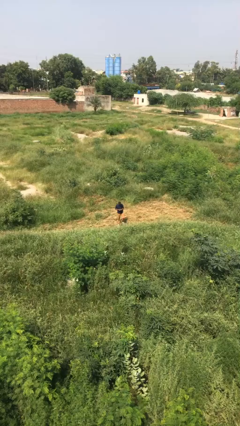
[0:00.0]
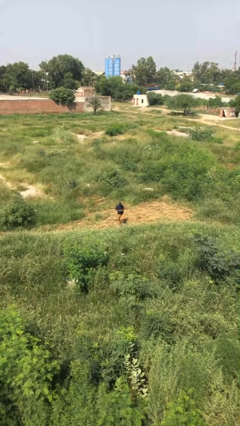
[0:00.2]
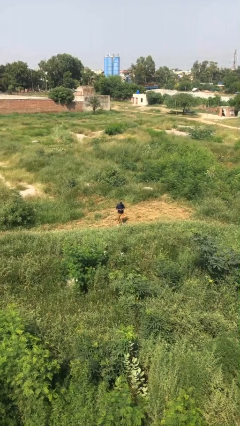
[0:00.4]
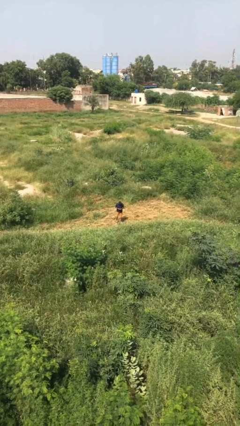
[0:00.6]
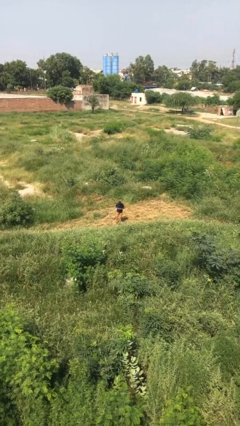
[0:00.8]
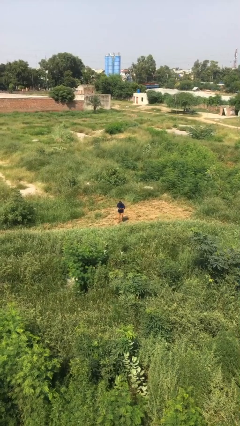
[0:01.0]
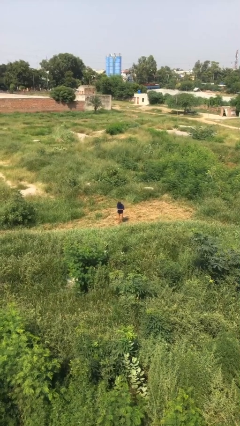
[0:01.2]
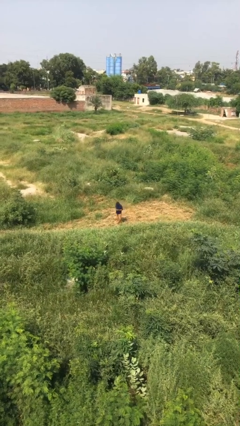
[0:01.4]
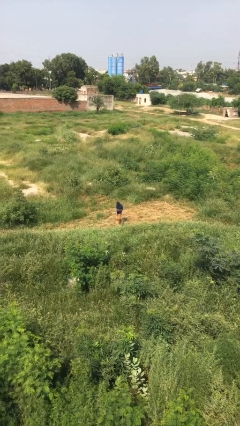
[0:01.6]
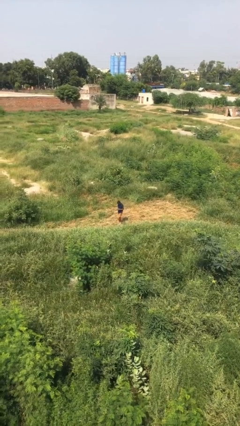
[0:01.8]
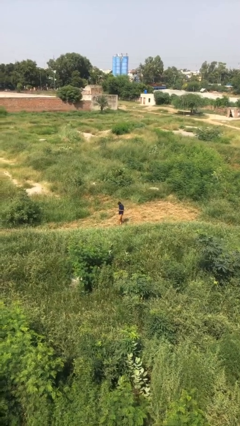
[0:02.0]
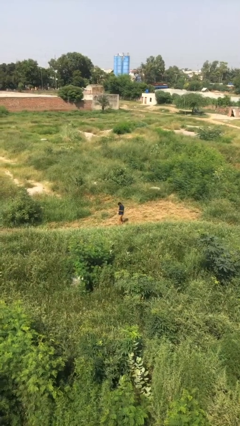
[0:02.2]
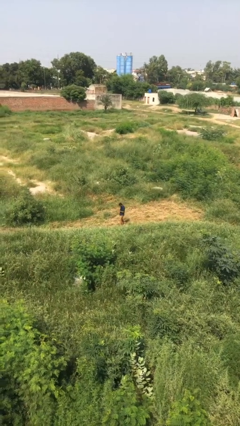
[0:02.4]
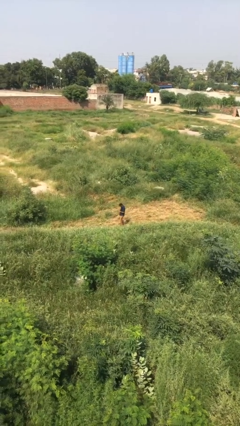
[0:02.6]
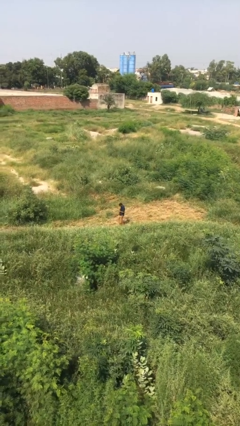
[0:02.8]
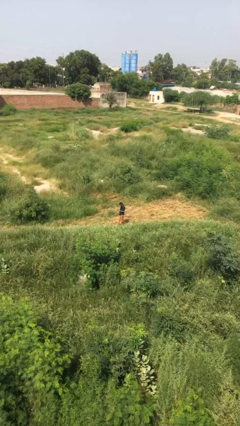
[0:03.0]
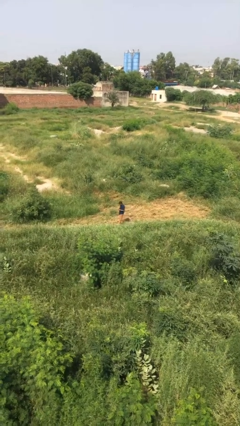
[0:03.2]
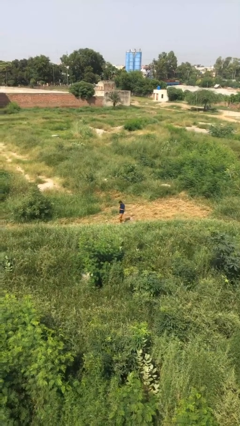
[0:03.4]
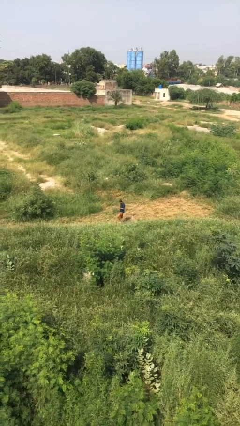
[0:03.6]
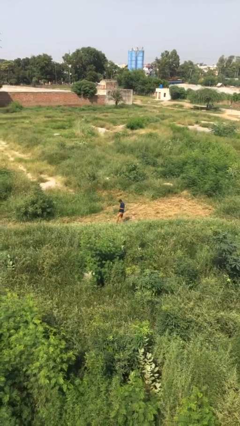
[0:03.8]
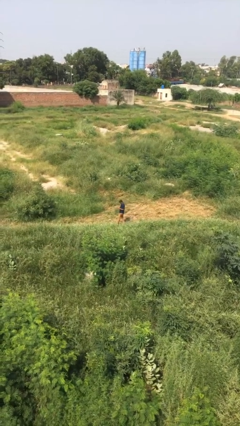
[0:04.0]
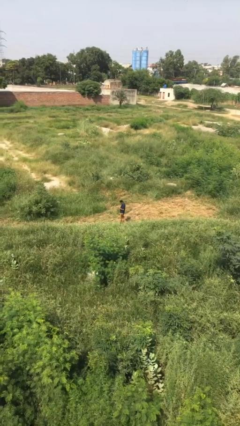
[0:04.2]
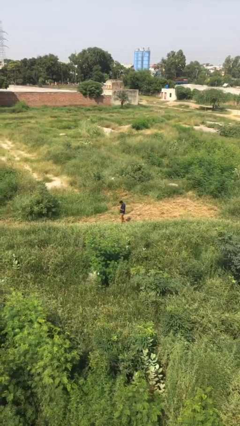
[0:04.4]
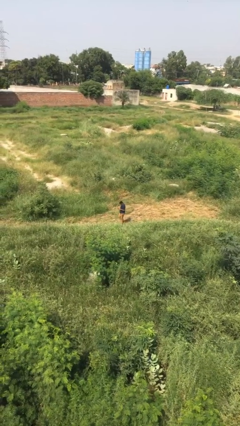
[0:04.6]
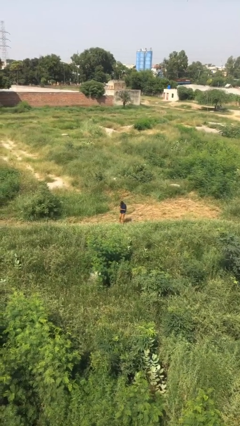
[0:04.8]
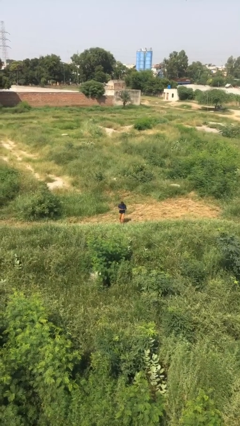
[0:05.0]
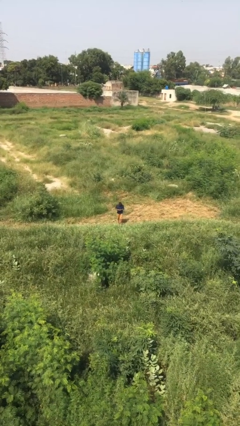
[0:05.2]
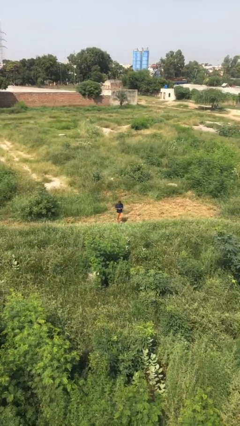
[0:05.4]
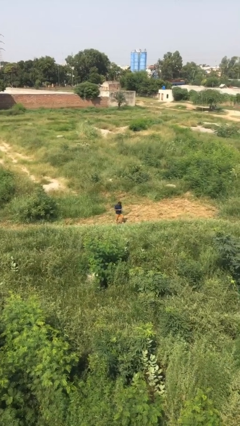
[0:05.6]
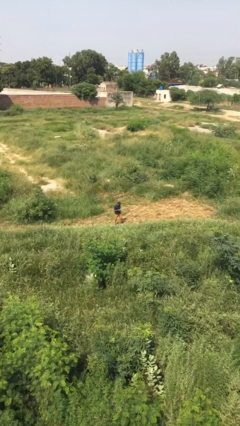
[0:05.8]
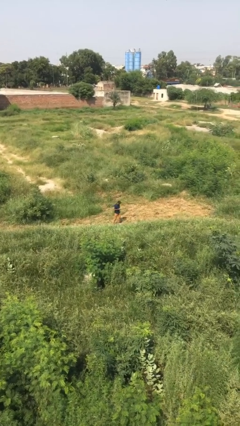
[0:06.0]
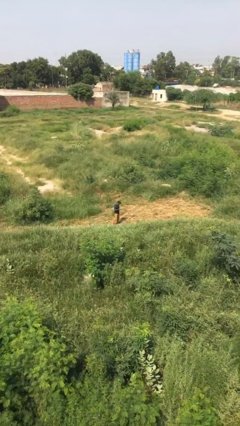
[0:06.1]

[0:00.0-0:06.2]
person texts on phone

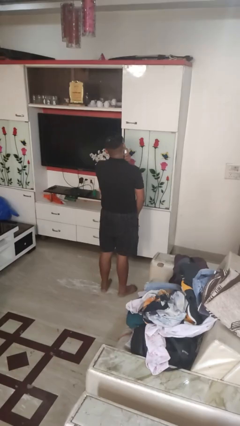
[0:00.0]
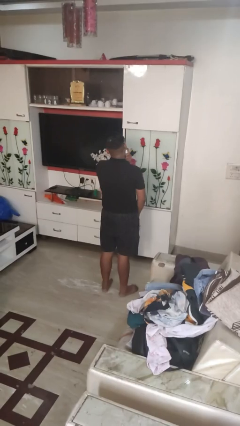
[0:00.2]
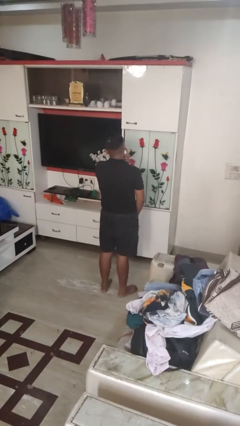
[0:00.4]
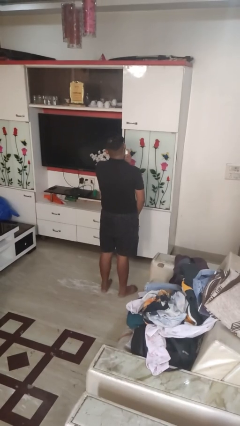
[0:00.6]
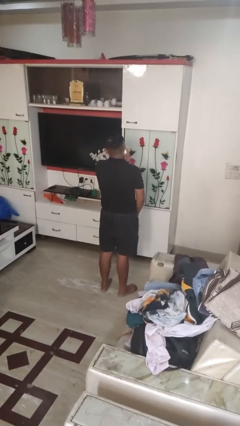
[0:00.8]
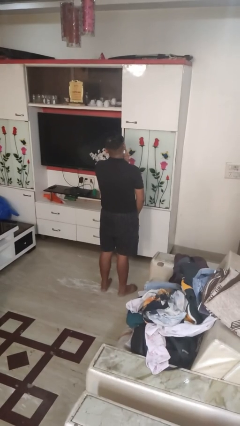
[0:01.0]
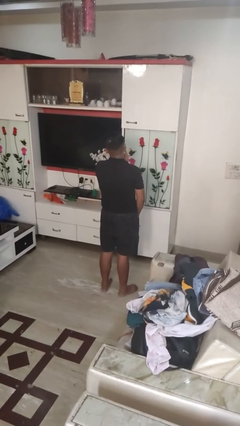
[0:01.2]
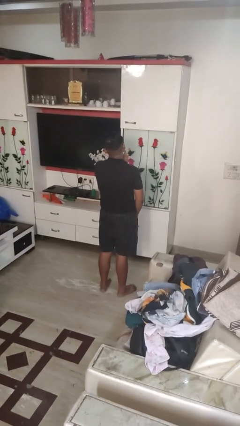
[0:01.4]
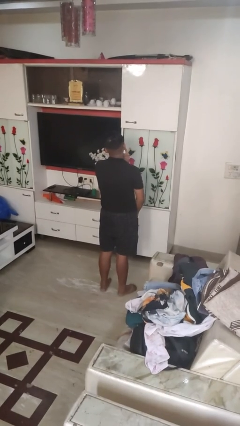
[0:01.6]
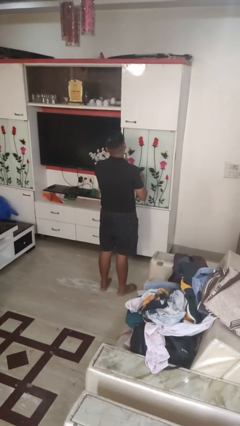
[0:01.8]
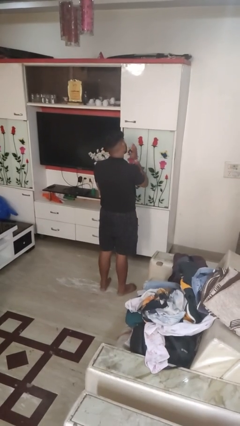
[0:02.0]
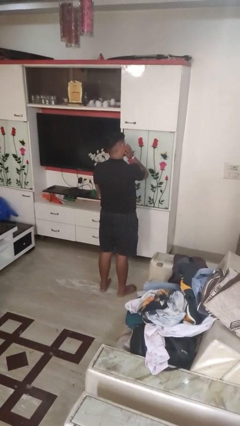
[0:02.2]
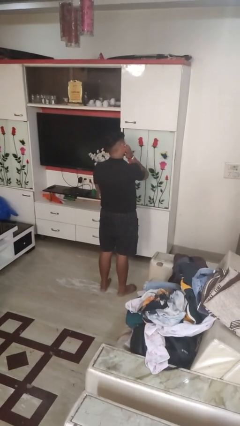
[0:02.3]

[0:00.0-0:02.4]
person applies shaving cream

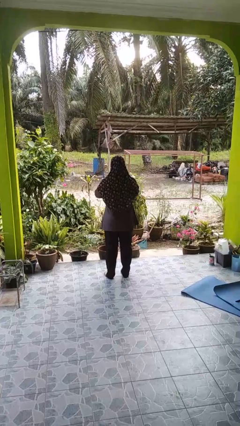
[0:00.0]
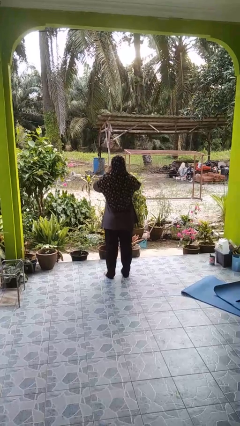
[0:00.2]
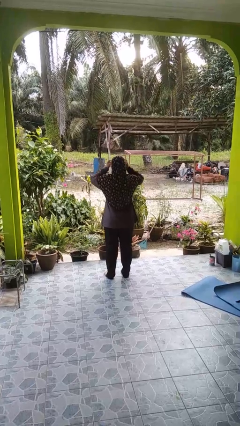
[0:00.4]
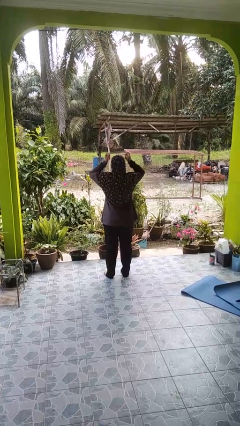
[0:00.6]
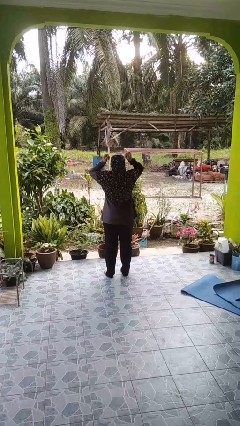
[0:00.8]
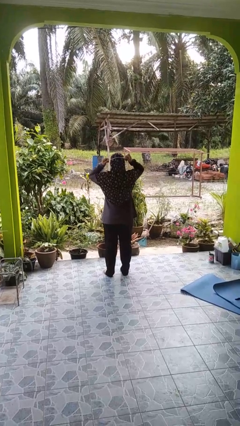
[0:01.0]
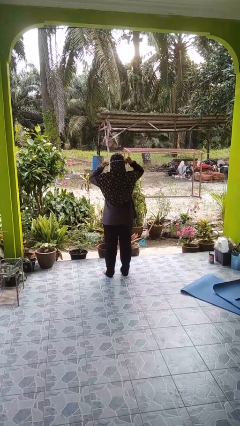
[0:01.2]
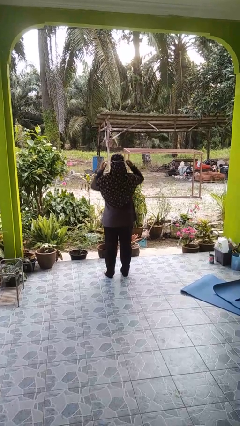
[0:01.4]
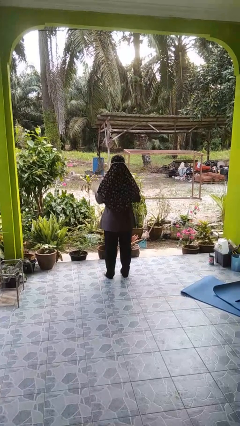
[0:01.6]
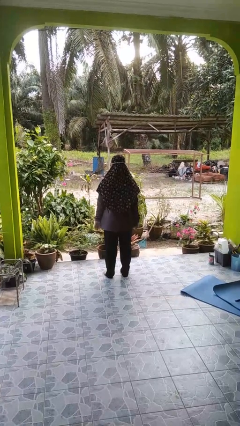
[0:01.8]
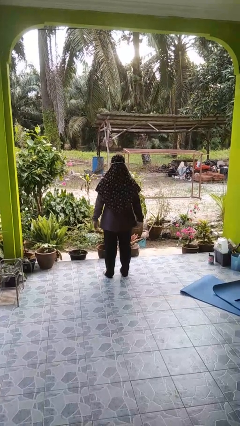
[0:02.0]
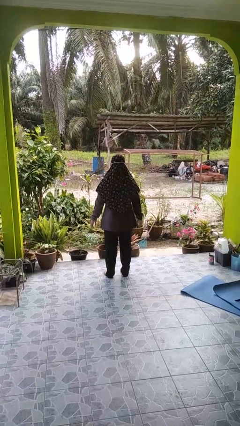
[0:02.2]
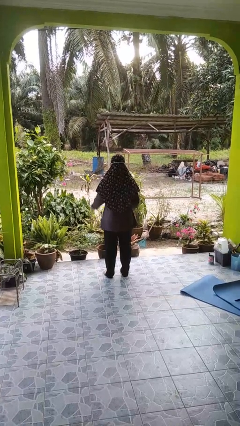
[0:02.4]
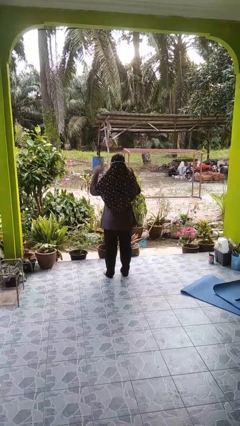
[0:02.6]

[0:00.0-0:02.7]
person puts on facemask

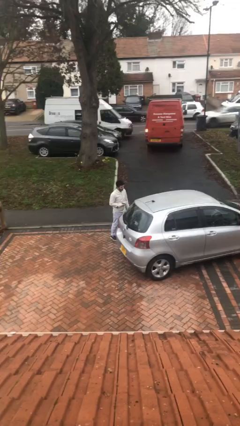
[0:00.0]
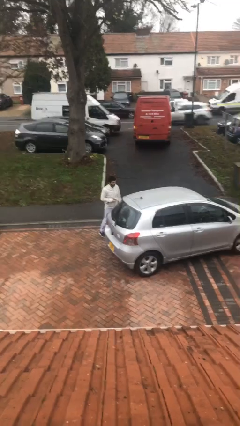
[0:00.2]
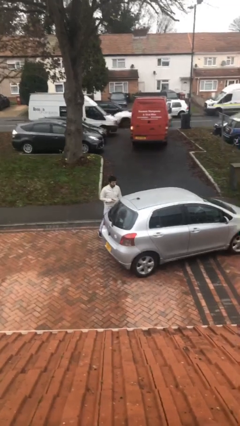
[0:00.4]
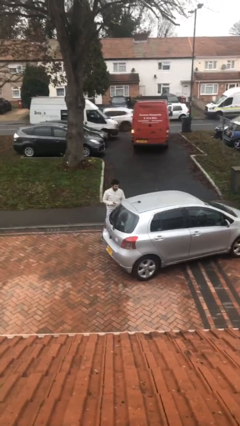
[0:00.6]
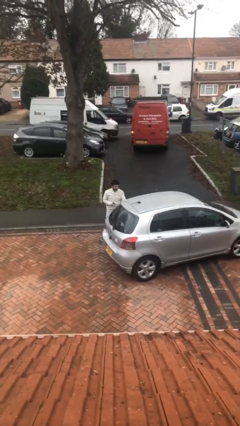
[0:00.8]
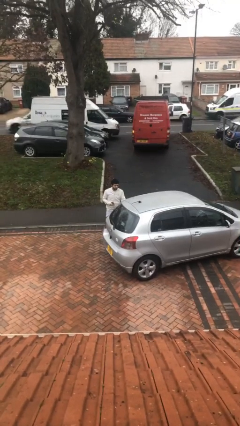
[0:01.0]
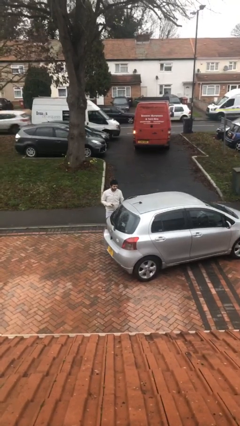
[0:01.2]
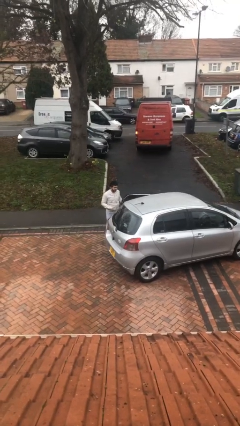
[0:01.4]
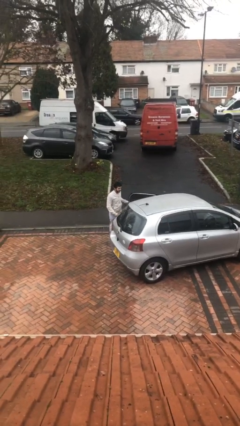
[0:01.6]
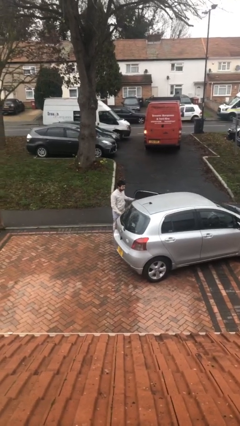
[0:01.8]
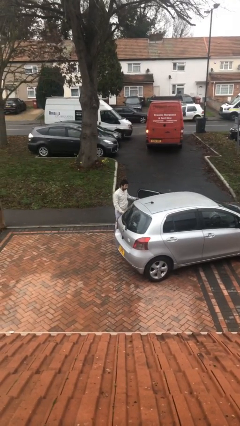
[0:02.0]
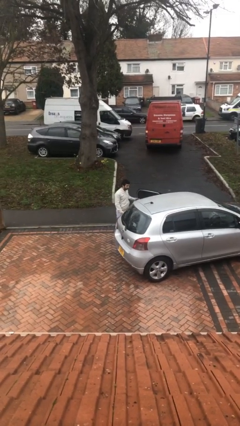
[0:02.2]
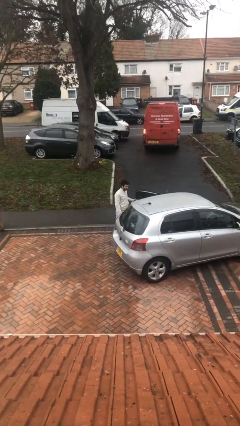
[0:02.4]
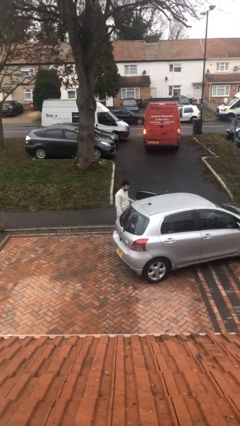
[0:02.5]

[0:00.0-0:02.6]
person opens car door

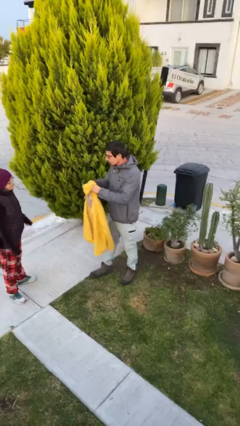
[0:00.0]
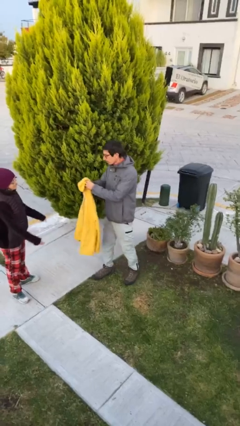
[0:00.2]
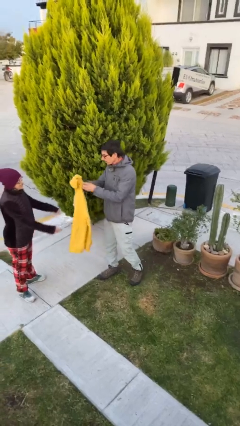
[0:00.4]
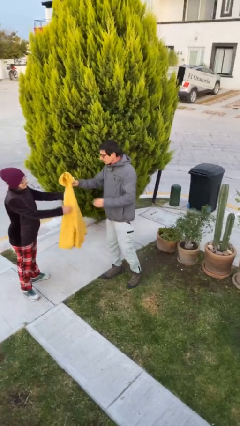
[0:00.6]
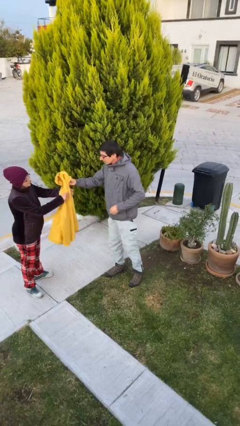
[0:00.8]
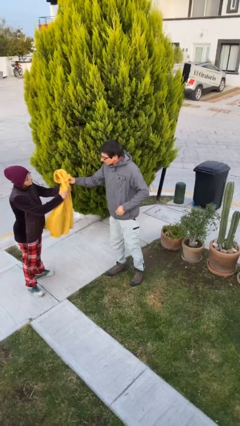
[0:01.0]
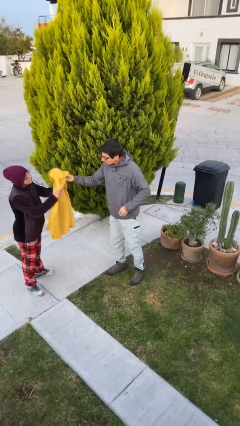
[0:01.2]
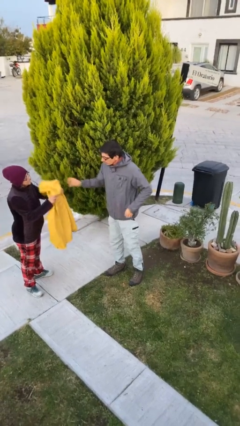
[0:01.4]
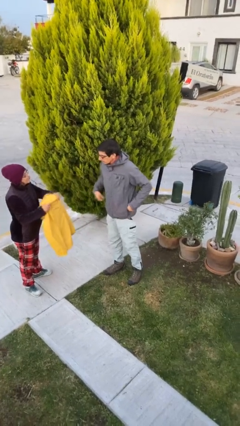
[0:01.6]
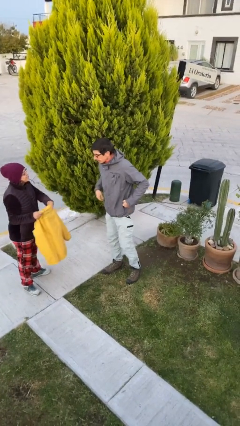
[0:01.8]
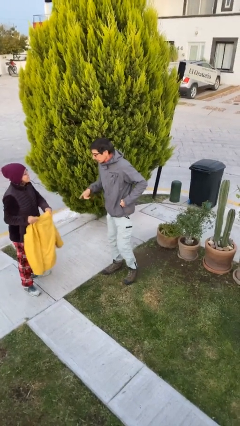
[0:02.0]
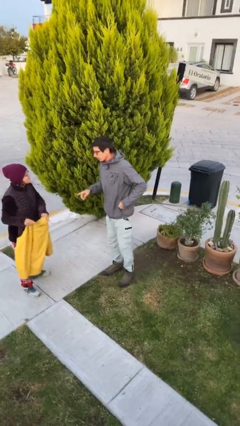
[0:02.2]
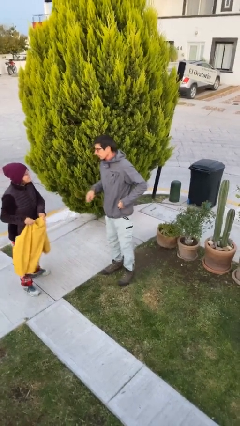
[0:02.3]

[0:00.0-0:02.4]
person transfers object to person

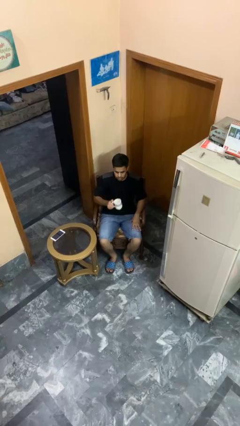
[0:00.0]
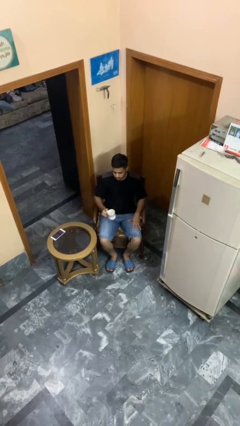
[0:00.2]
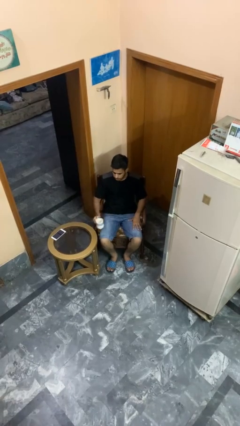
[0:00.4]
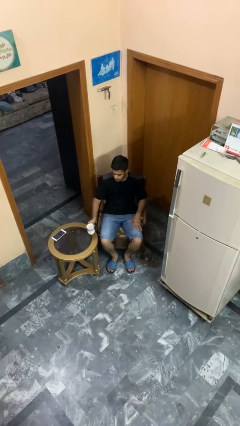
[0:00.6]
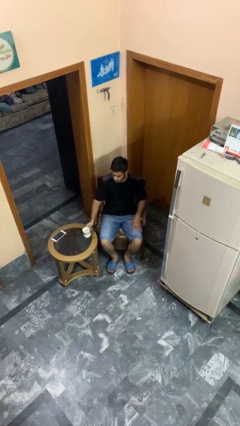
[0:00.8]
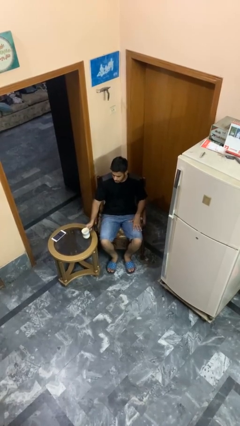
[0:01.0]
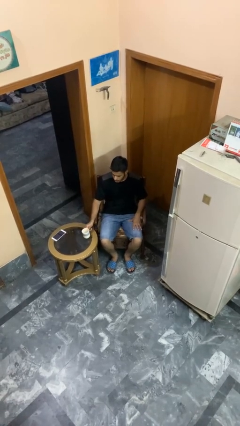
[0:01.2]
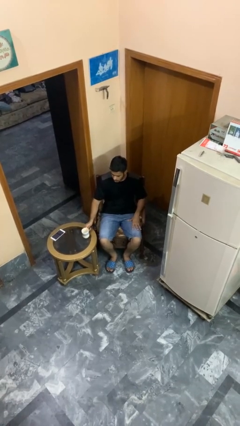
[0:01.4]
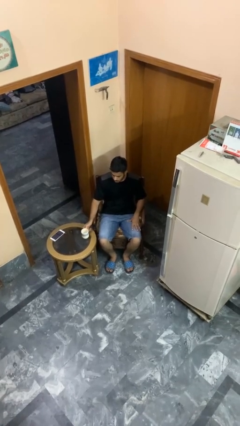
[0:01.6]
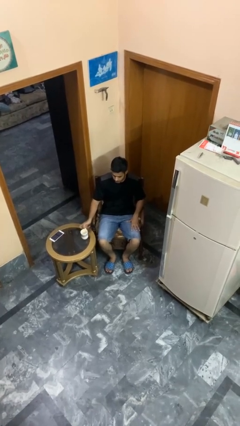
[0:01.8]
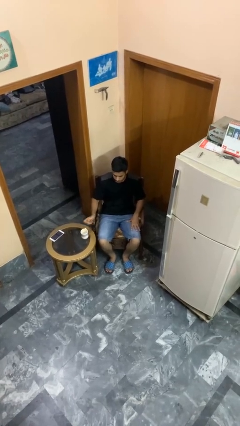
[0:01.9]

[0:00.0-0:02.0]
person puts down object on table
